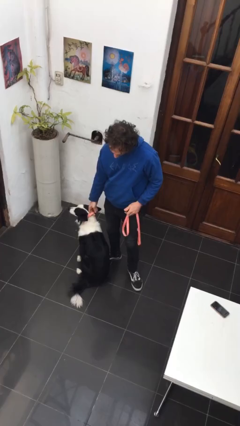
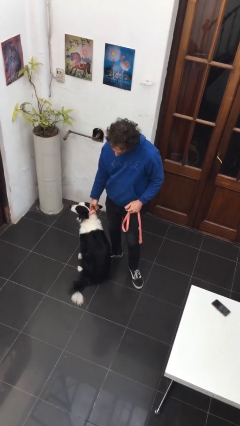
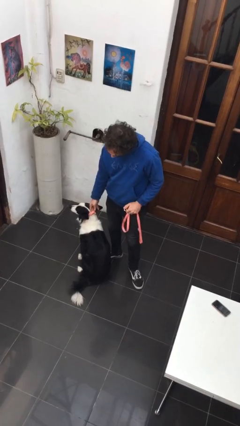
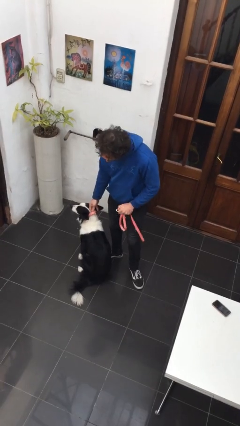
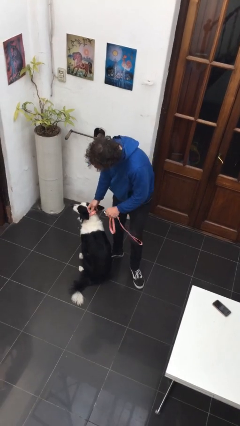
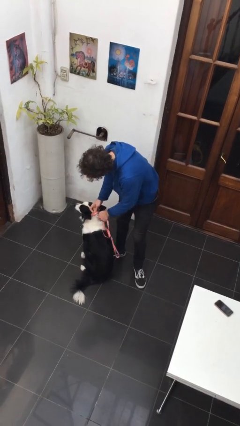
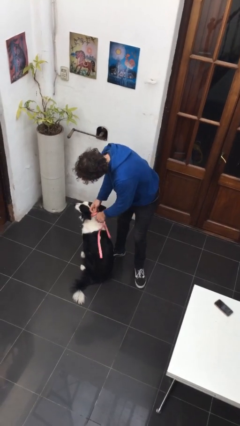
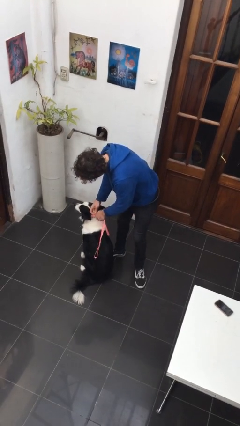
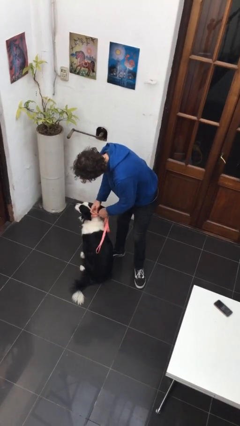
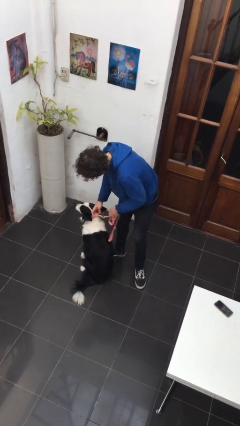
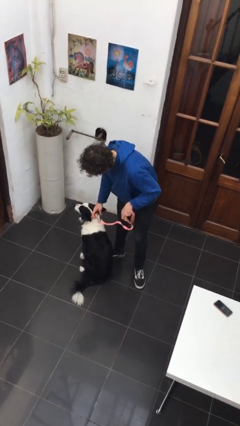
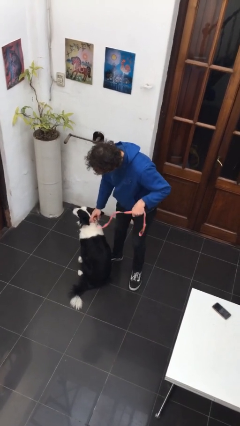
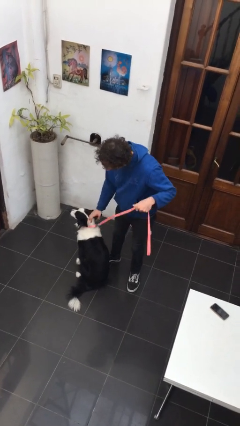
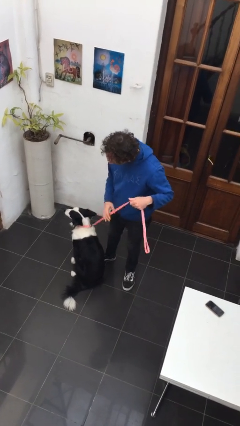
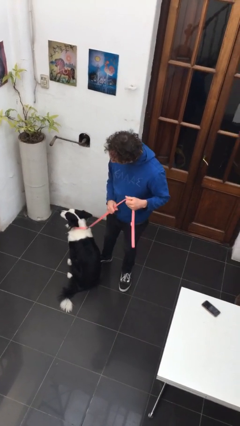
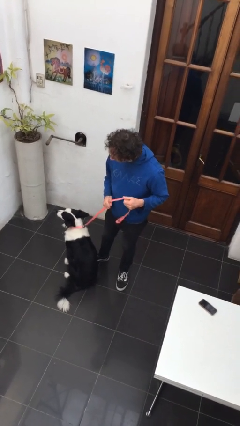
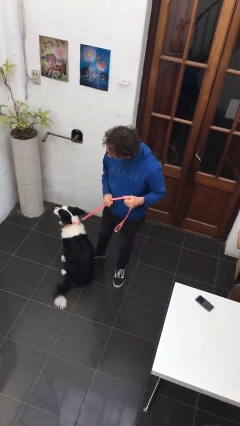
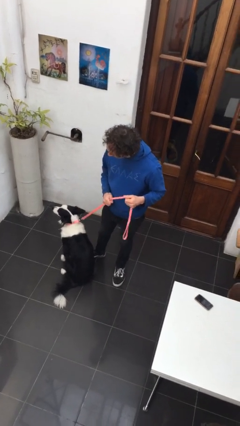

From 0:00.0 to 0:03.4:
person attaches leash to dog

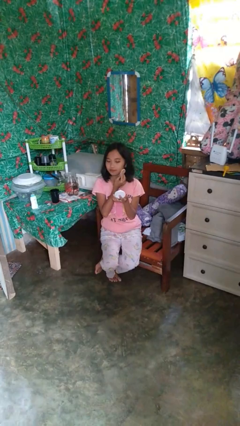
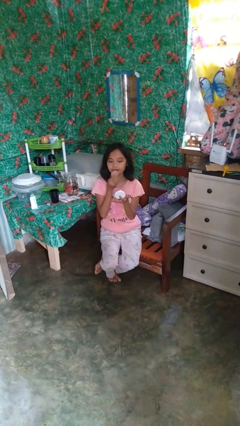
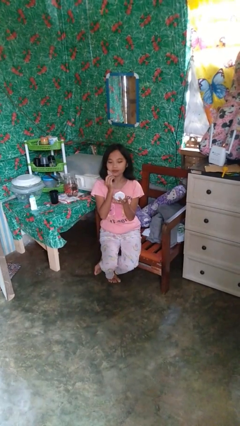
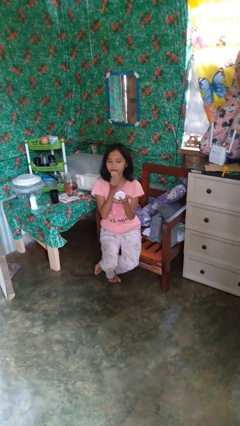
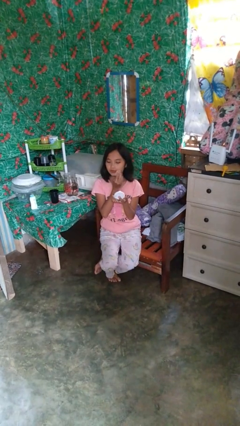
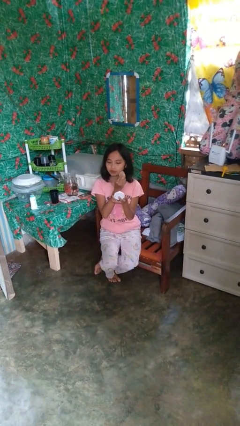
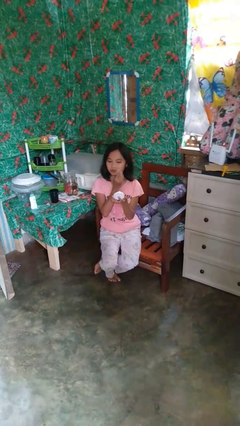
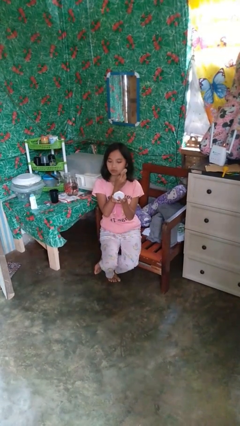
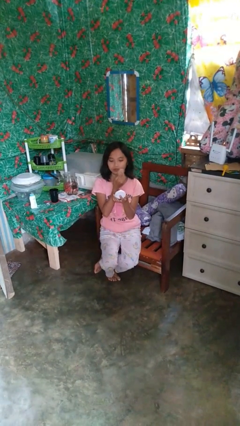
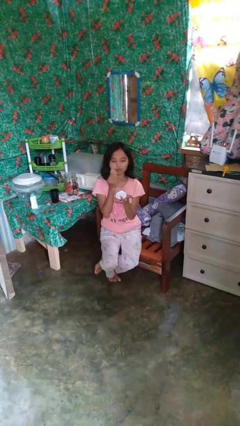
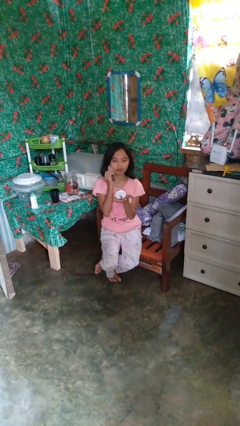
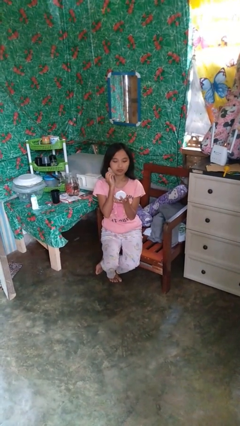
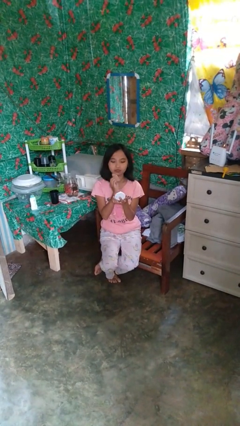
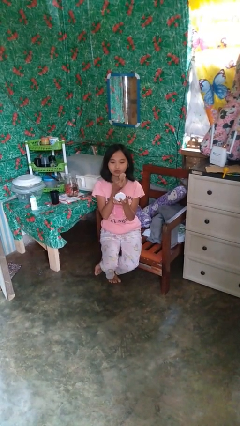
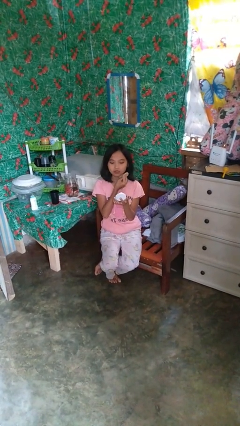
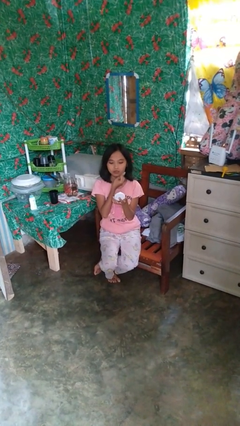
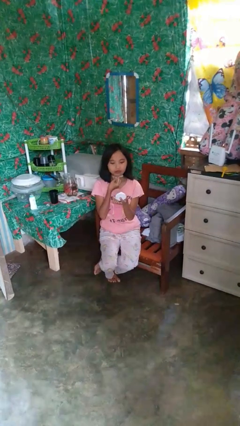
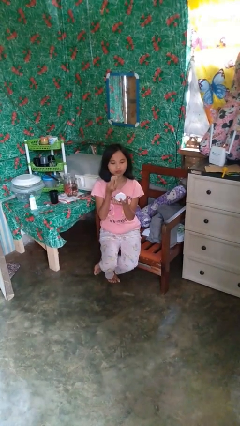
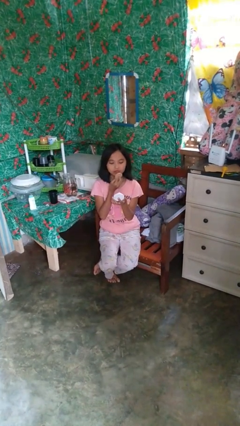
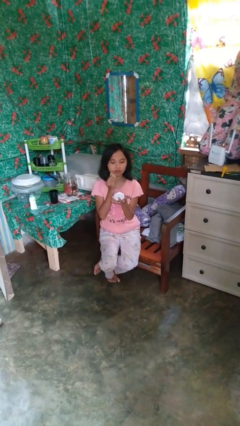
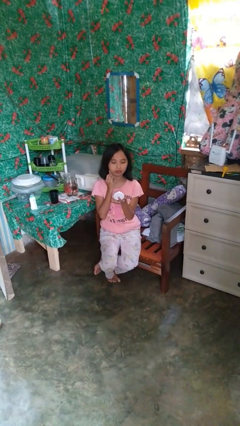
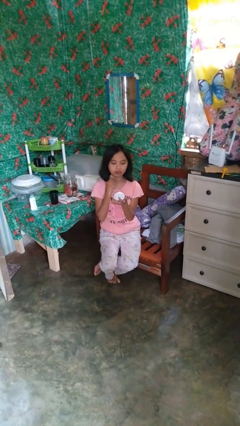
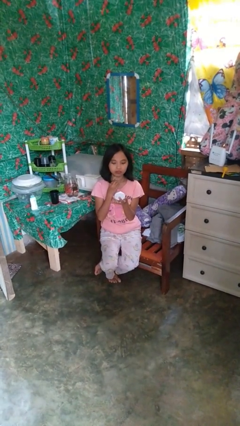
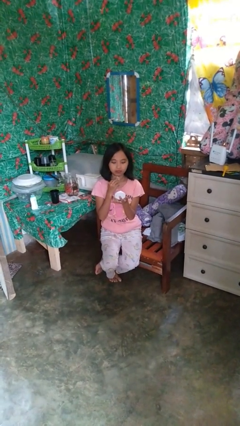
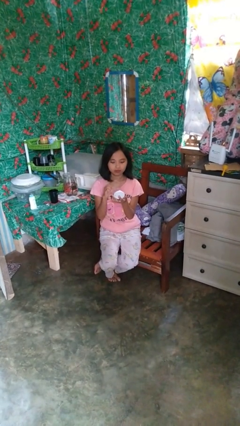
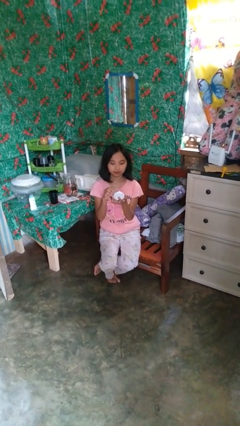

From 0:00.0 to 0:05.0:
person applies foundation makeup

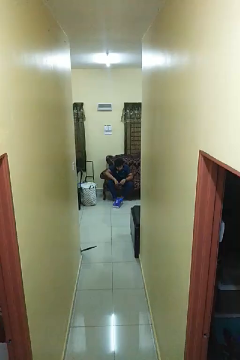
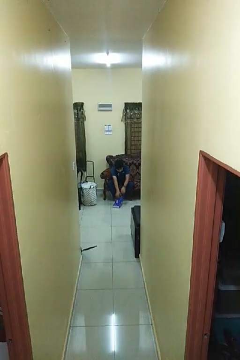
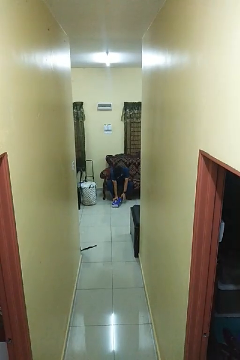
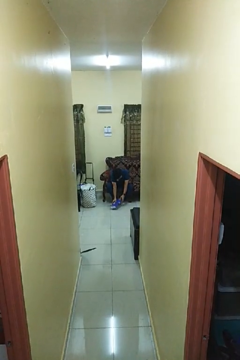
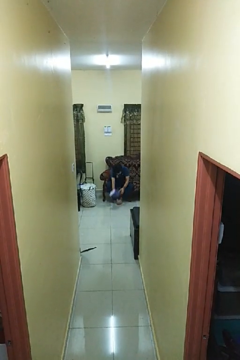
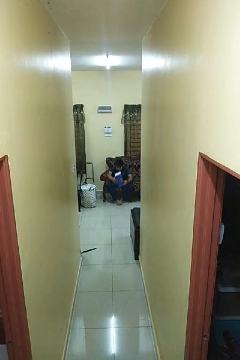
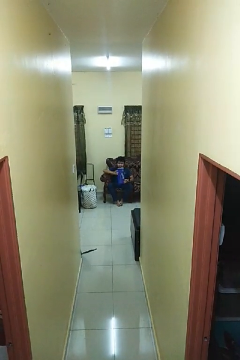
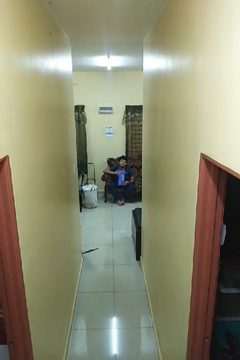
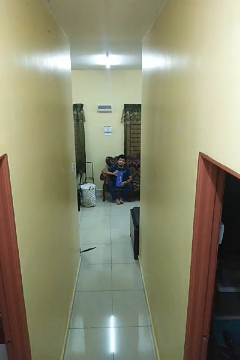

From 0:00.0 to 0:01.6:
person picks up object from floor

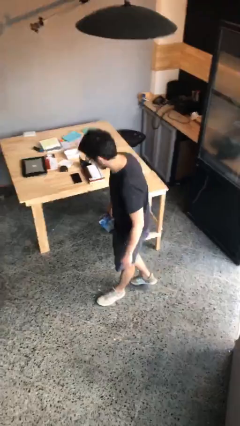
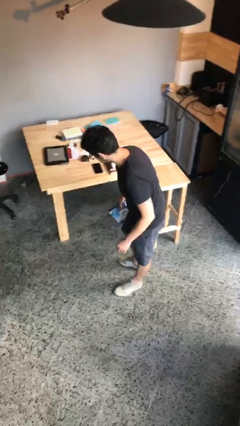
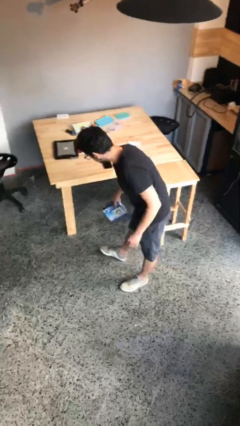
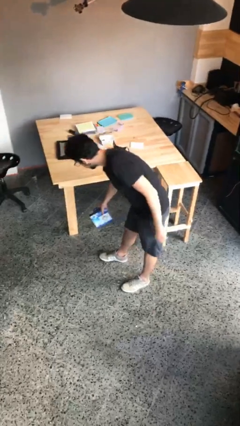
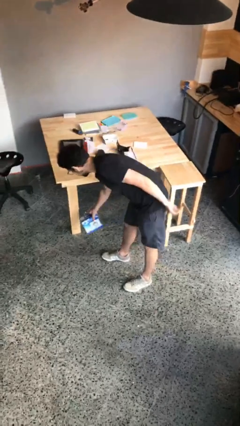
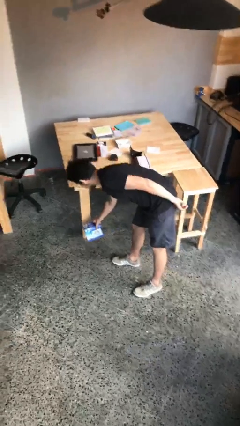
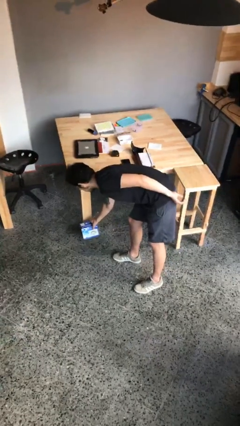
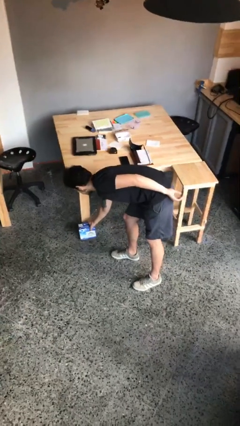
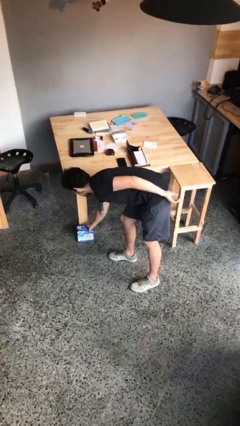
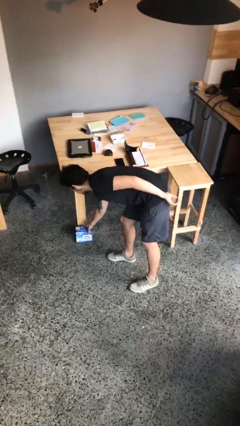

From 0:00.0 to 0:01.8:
person puts down object on floor

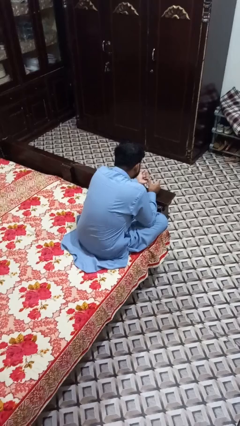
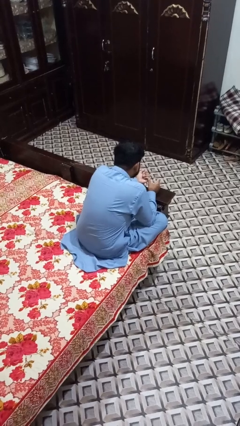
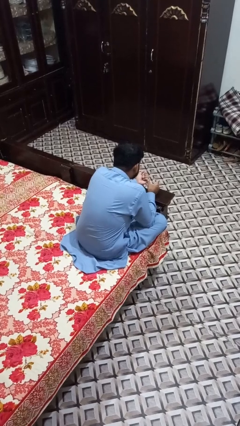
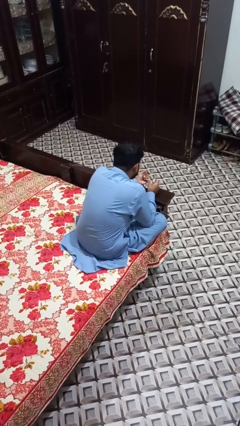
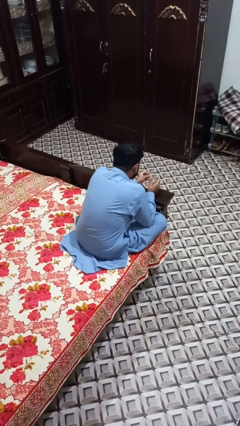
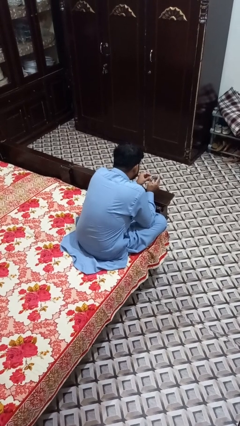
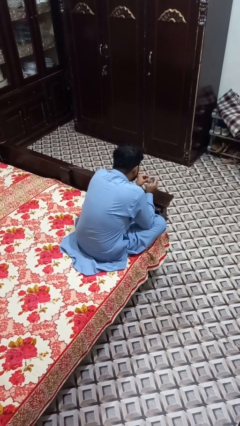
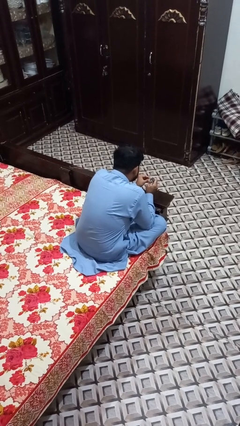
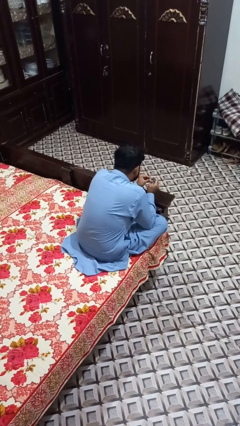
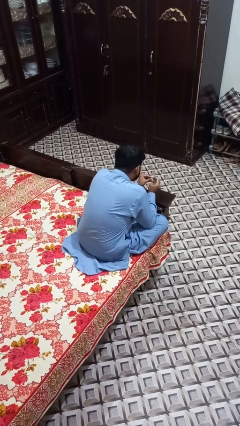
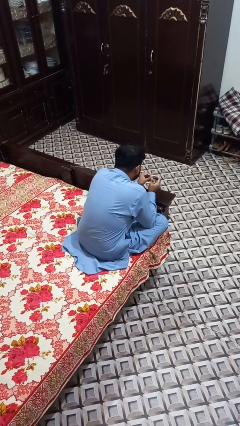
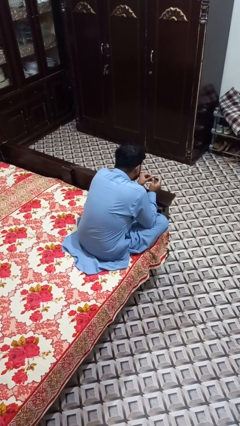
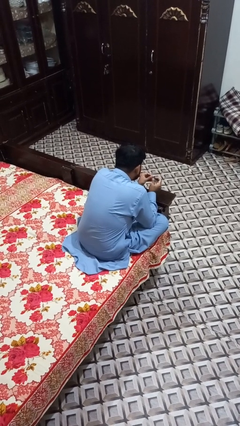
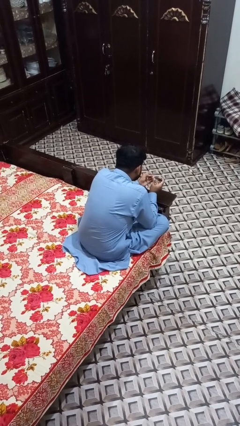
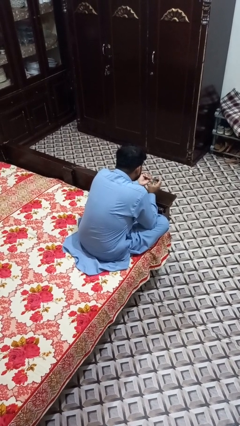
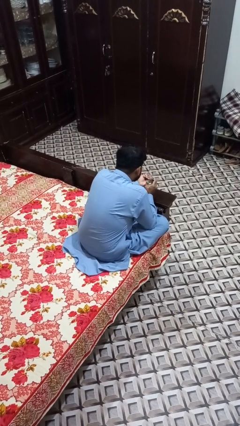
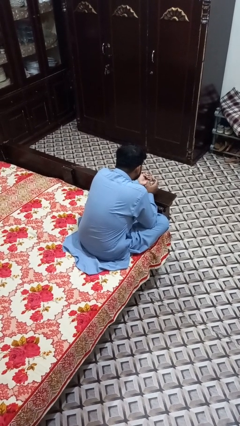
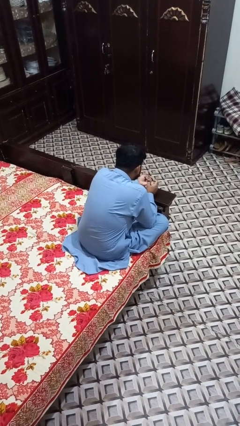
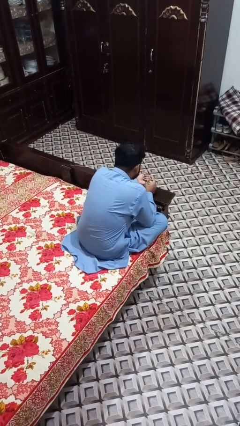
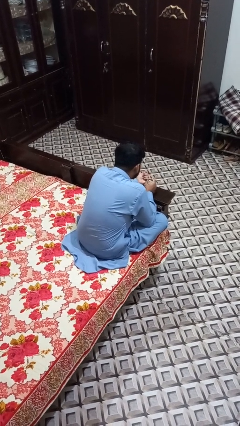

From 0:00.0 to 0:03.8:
person clips fingernails

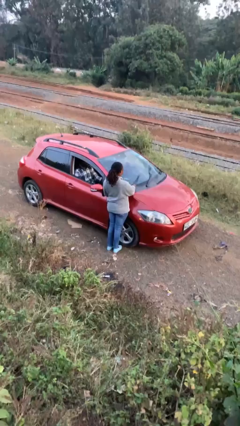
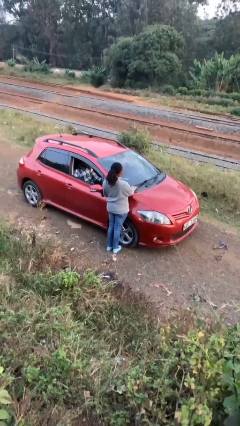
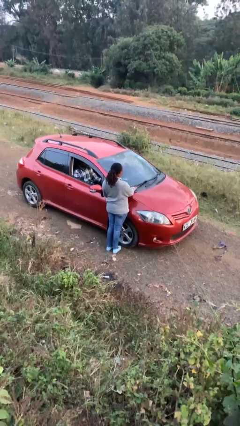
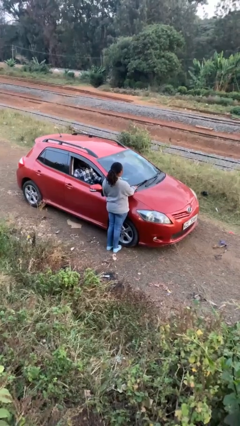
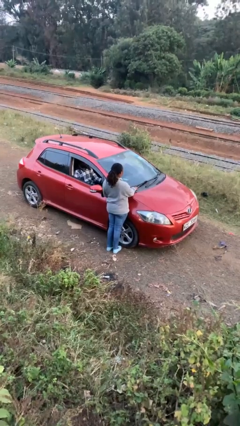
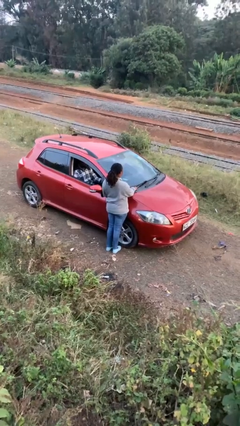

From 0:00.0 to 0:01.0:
person flips down car wipers

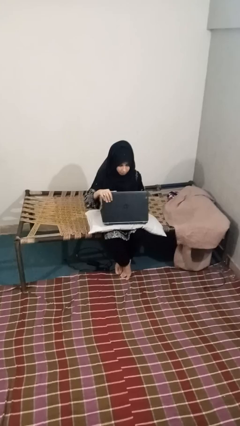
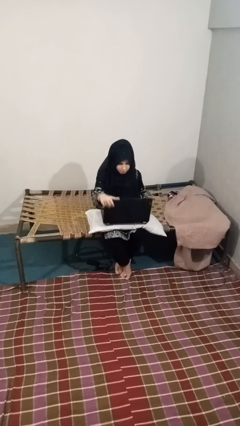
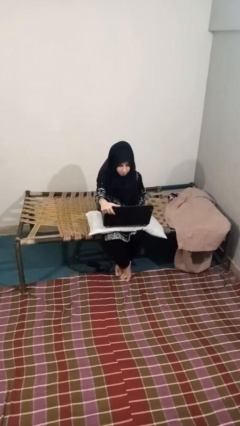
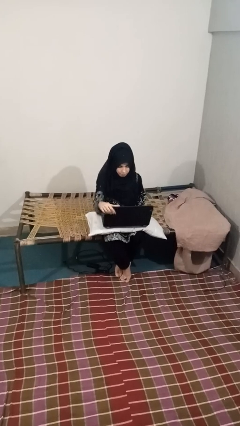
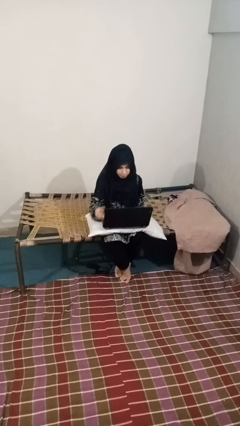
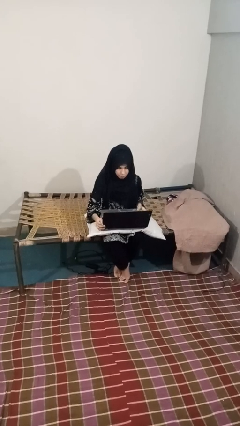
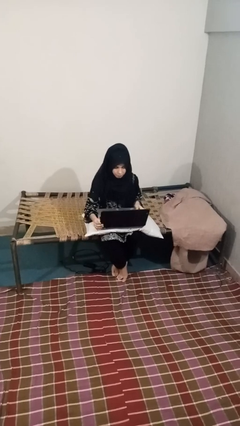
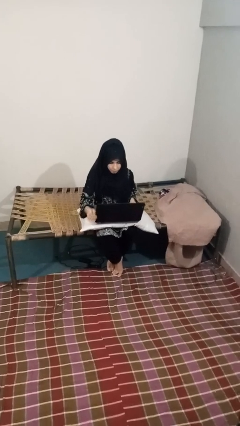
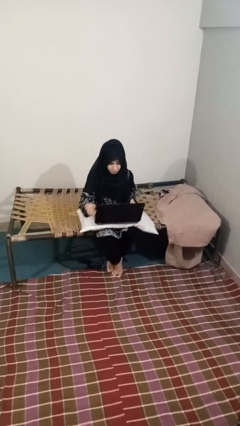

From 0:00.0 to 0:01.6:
person opens laptop
